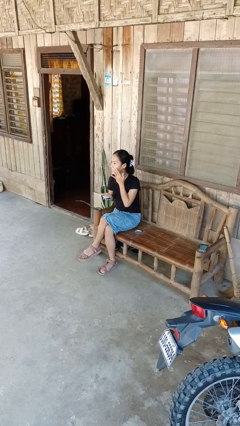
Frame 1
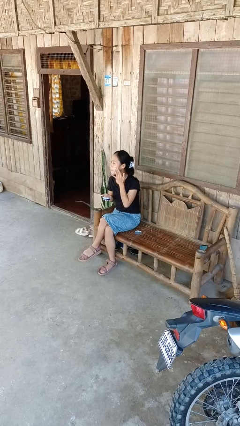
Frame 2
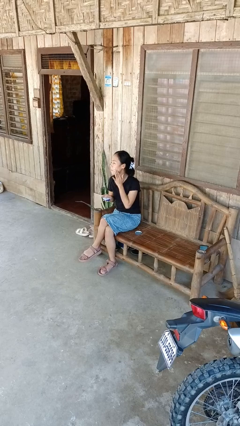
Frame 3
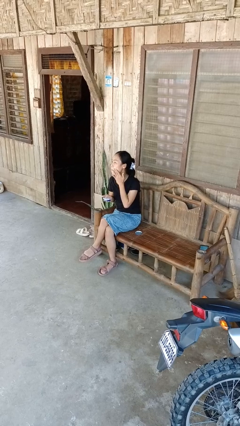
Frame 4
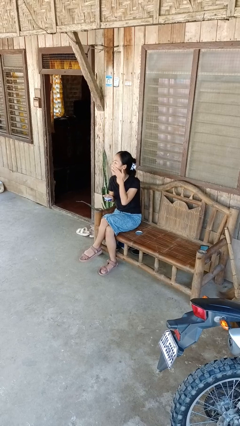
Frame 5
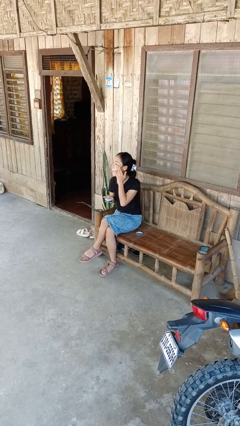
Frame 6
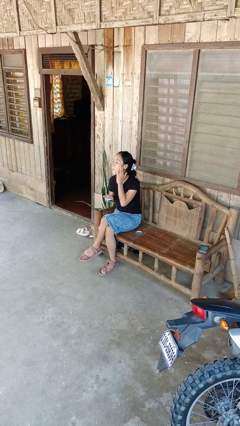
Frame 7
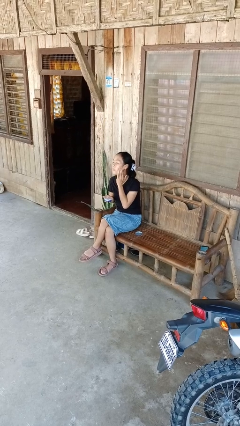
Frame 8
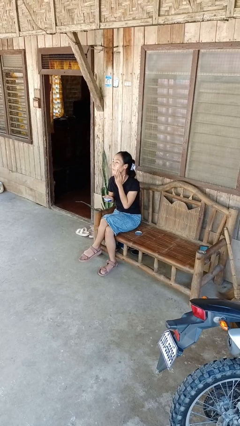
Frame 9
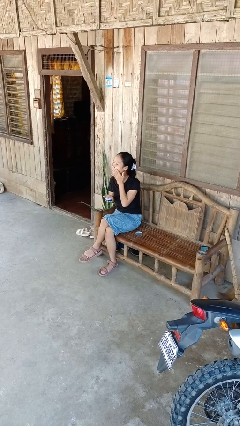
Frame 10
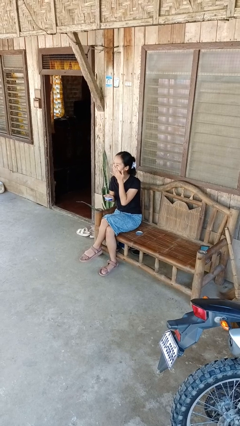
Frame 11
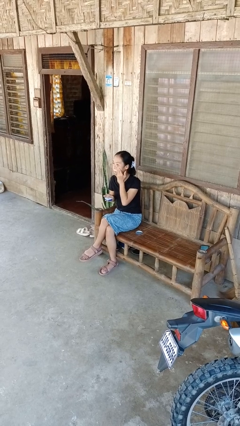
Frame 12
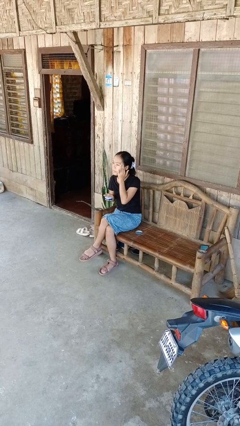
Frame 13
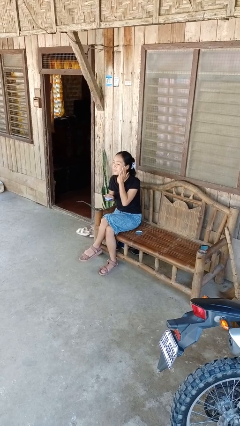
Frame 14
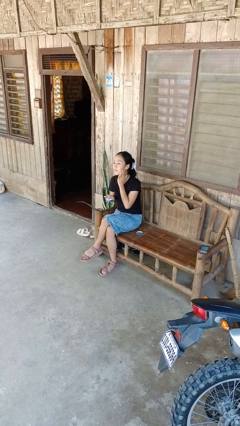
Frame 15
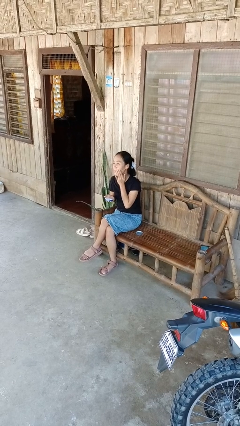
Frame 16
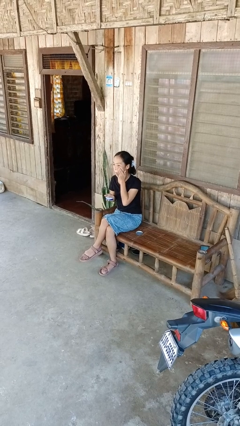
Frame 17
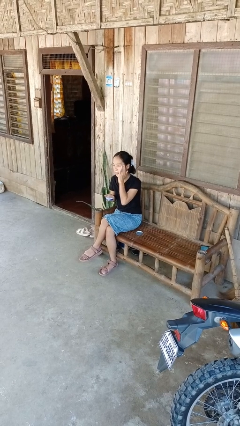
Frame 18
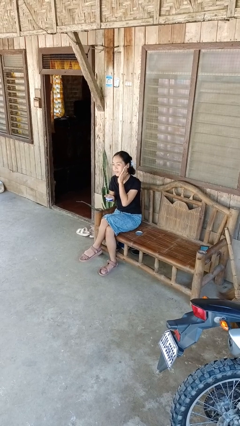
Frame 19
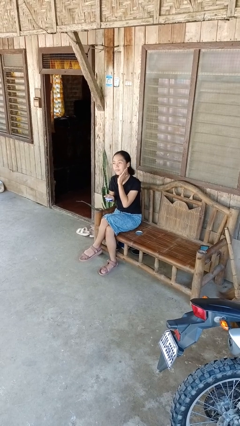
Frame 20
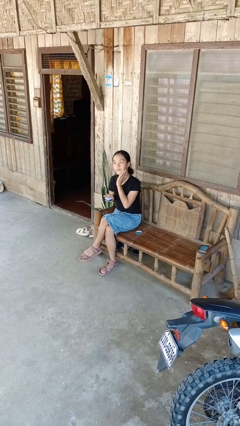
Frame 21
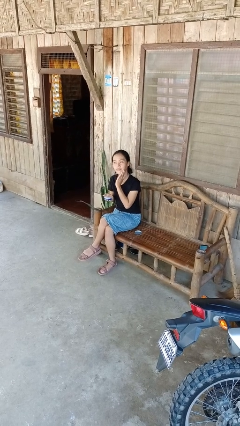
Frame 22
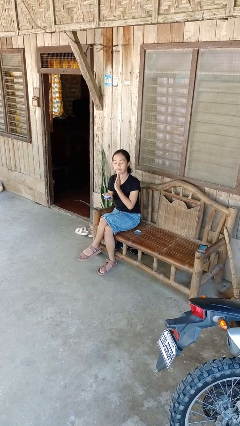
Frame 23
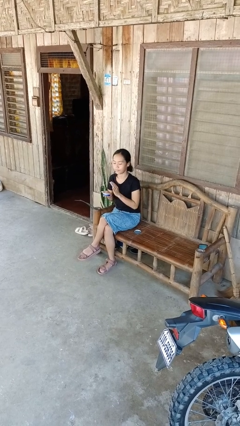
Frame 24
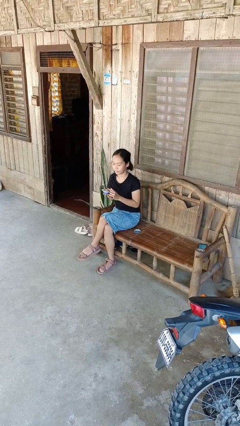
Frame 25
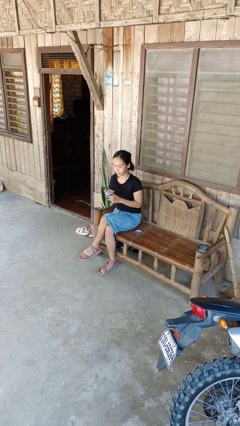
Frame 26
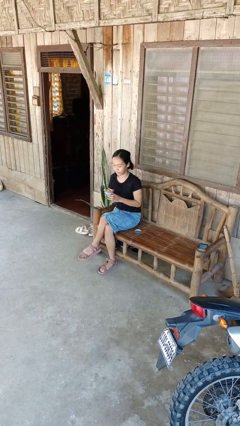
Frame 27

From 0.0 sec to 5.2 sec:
person applies facial moisturizer

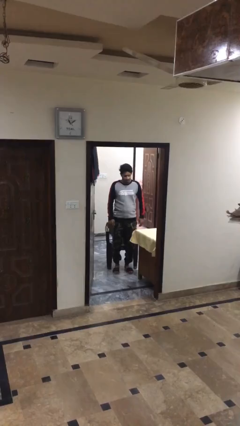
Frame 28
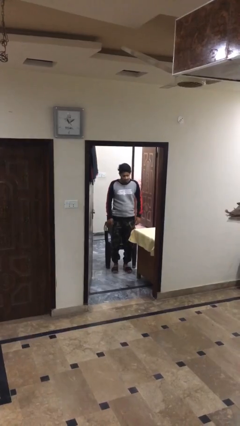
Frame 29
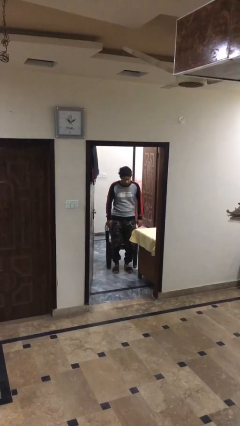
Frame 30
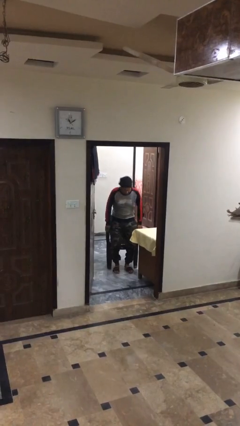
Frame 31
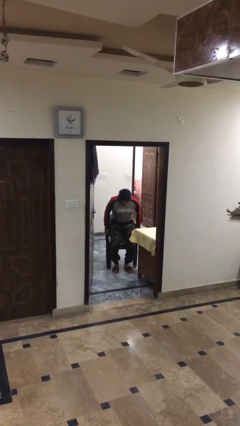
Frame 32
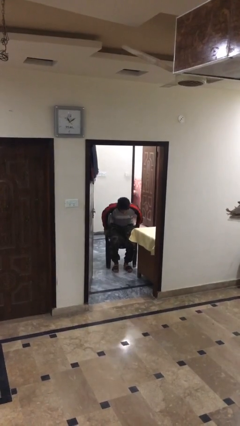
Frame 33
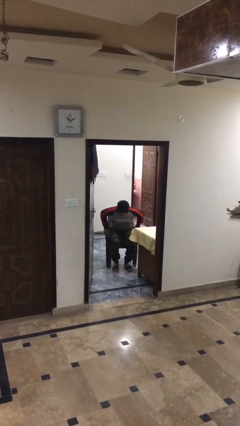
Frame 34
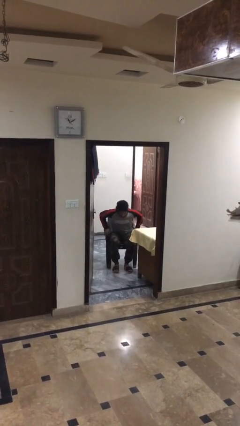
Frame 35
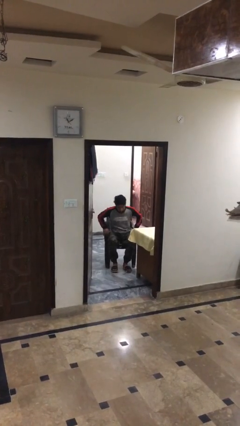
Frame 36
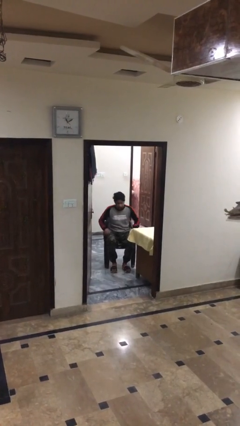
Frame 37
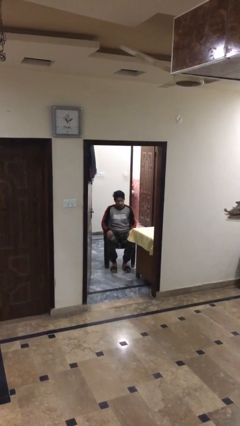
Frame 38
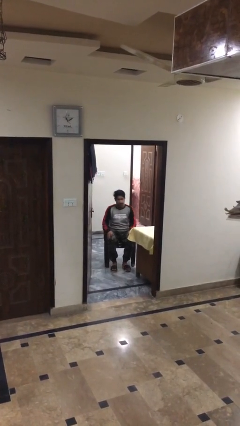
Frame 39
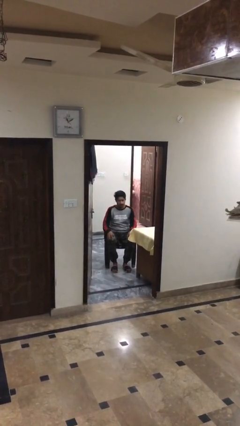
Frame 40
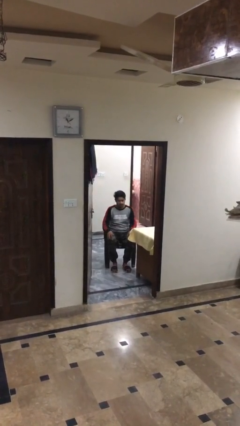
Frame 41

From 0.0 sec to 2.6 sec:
person sits down

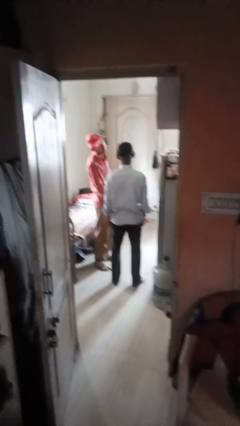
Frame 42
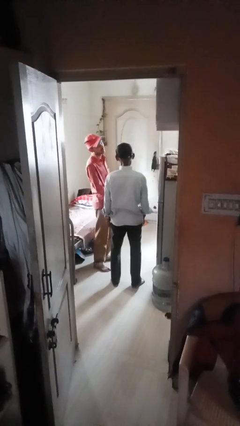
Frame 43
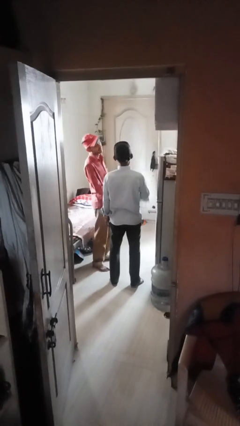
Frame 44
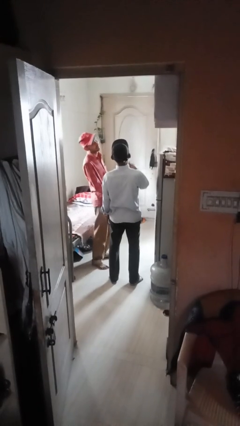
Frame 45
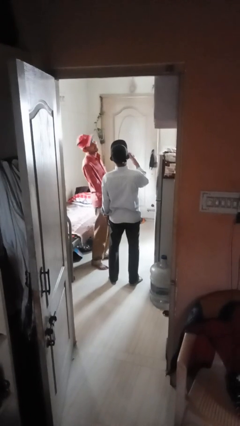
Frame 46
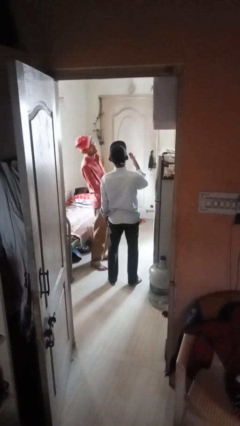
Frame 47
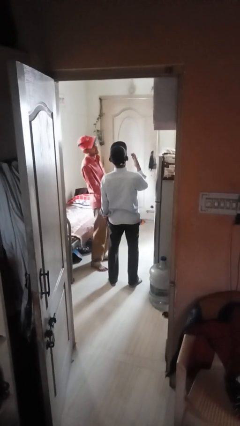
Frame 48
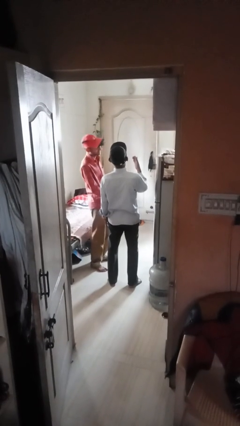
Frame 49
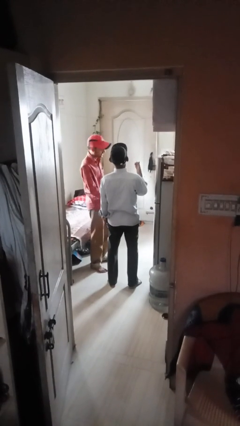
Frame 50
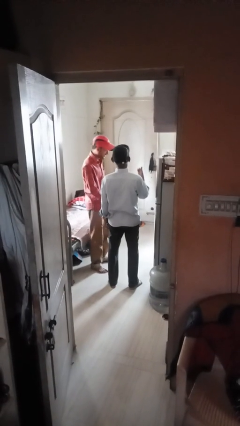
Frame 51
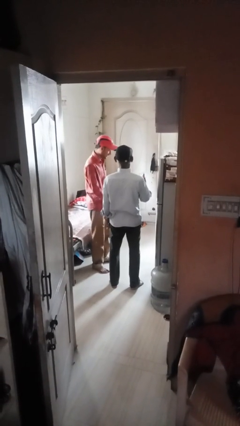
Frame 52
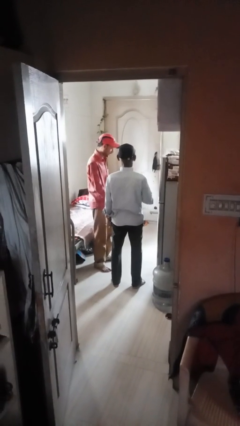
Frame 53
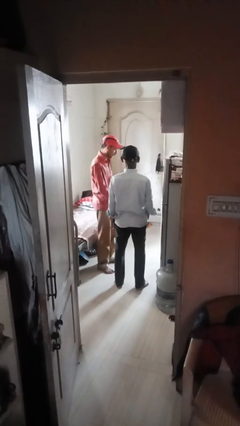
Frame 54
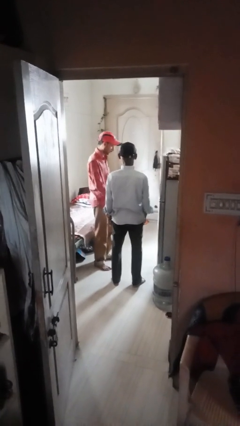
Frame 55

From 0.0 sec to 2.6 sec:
person laughs with person

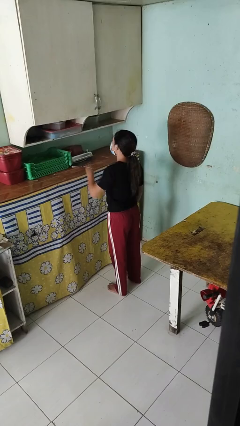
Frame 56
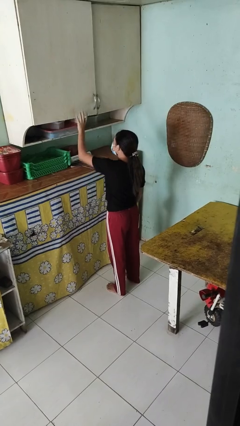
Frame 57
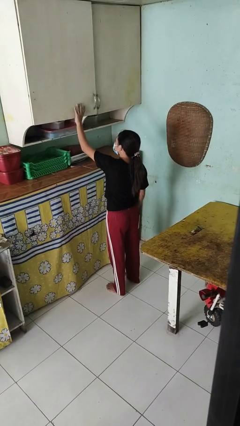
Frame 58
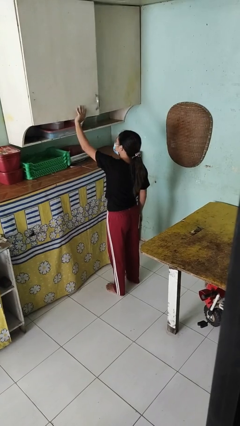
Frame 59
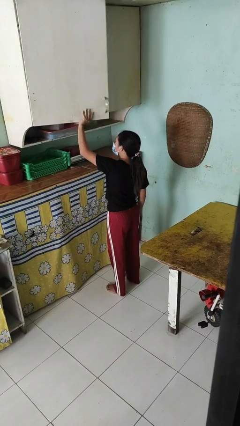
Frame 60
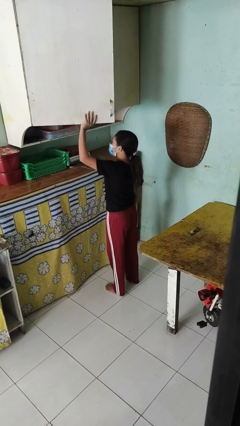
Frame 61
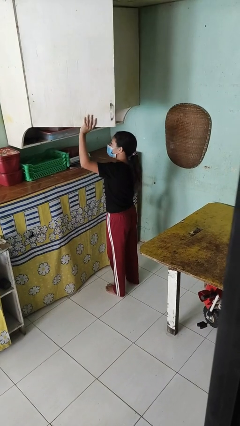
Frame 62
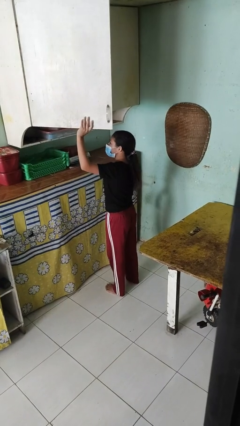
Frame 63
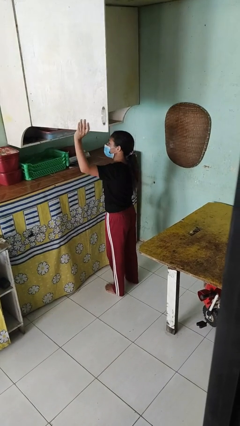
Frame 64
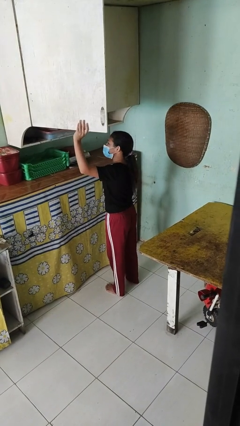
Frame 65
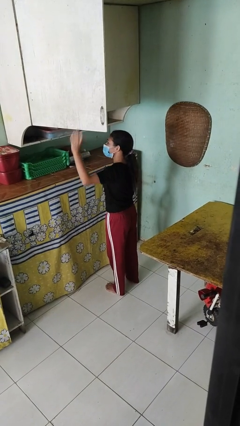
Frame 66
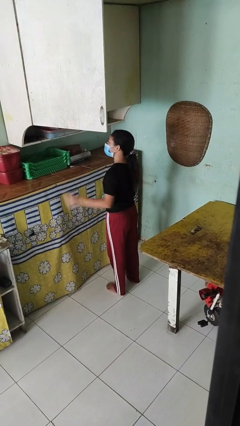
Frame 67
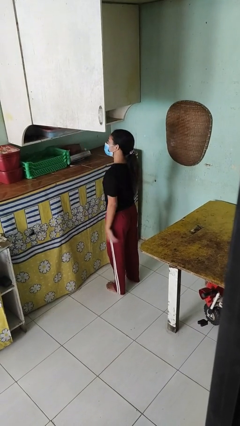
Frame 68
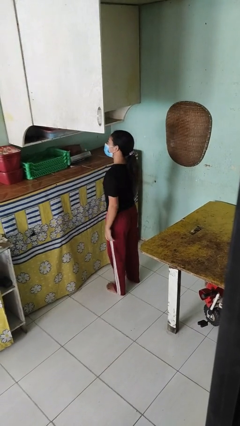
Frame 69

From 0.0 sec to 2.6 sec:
person opens cabinet

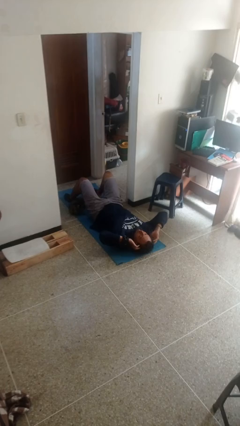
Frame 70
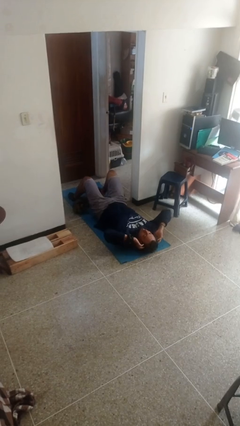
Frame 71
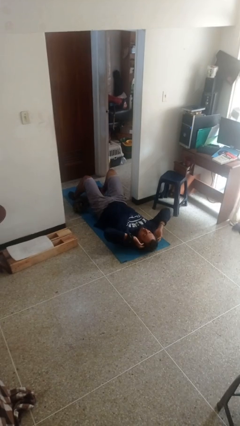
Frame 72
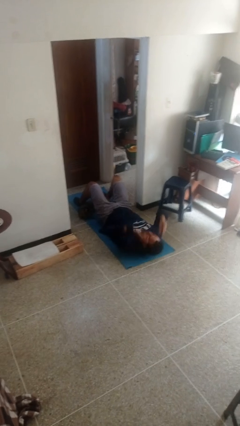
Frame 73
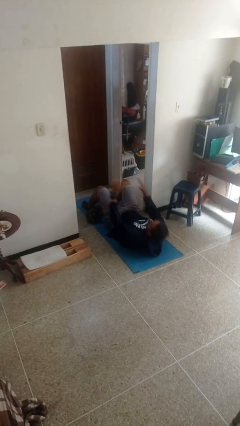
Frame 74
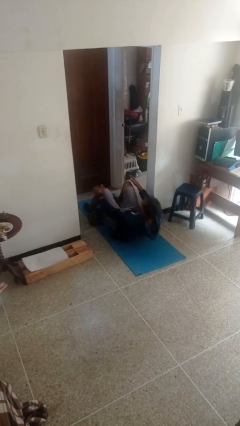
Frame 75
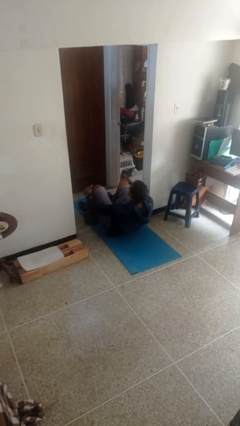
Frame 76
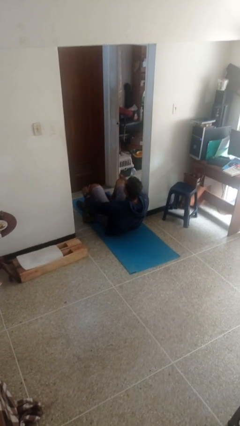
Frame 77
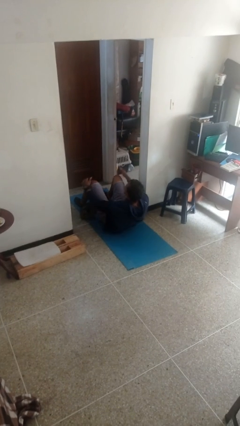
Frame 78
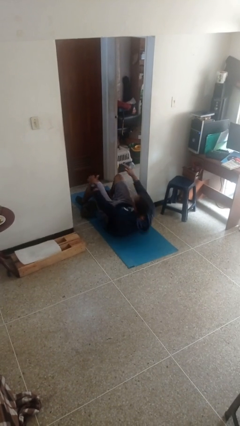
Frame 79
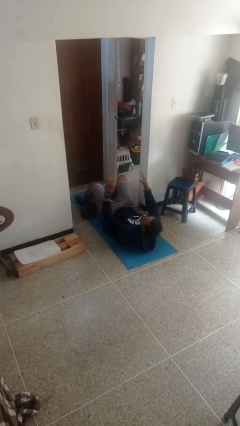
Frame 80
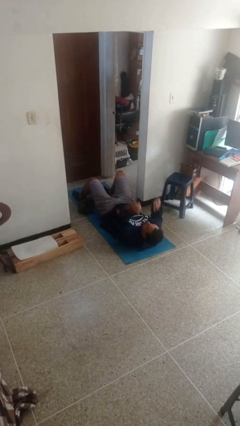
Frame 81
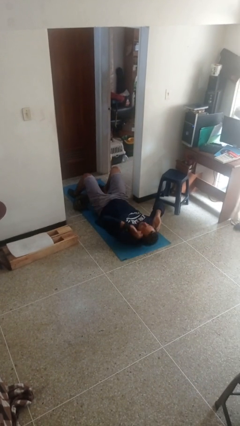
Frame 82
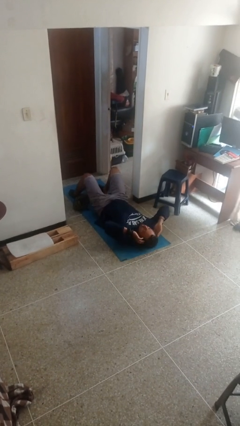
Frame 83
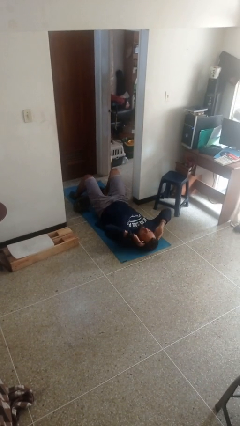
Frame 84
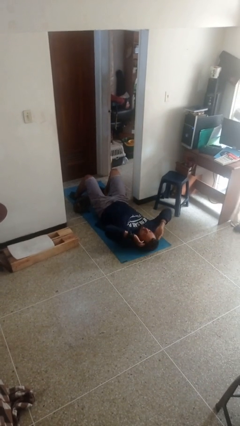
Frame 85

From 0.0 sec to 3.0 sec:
person exercises with situp

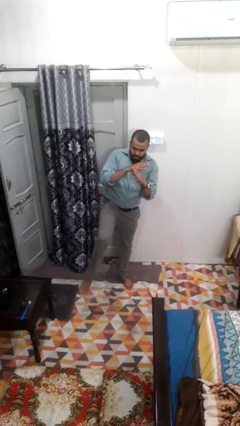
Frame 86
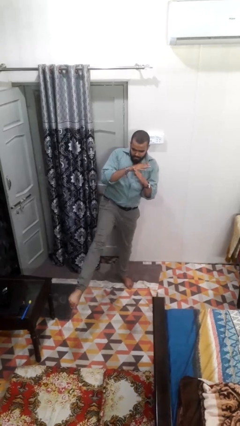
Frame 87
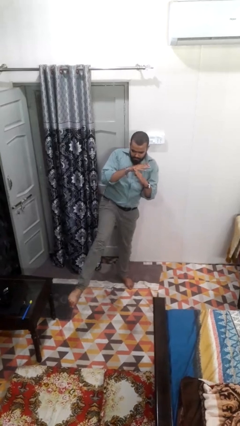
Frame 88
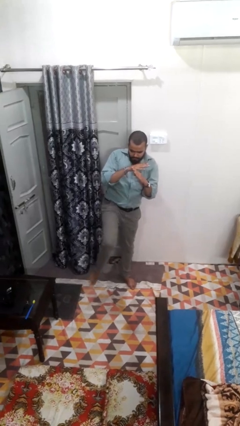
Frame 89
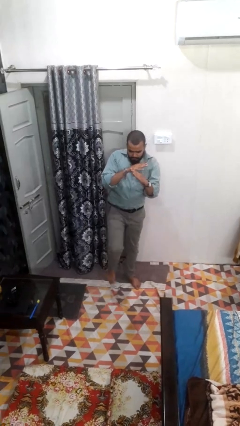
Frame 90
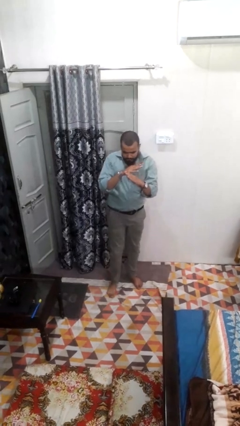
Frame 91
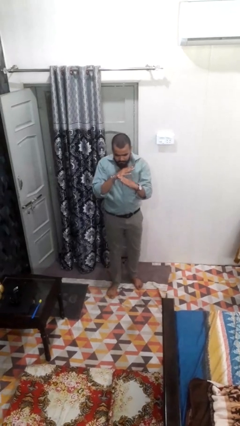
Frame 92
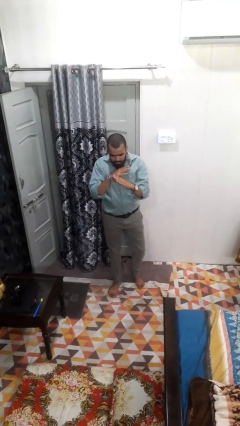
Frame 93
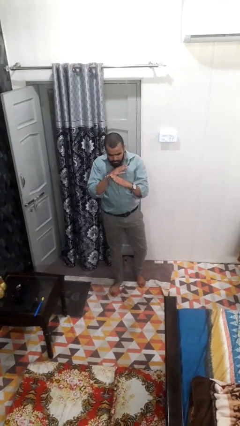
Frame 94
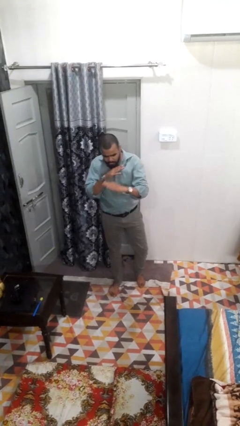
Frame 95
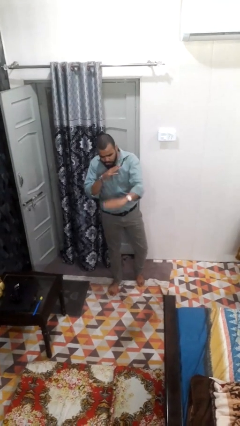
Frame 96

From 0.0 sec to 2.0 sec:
person karate kicks
